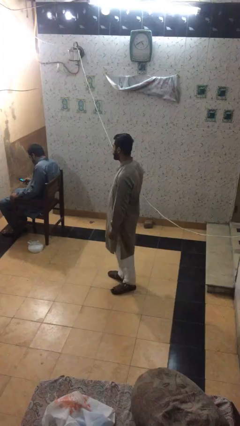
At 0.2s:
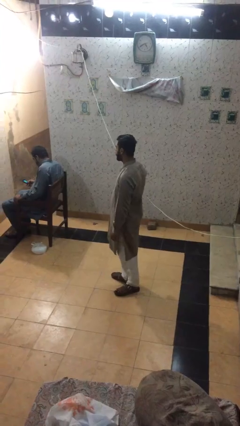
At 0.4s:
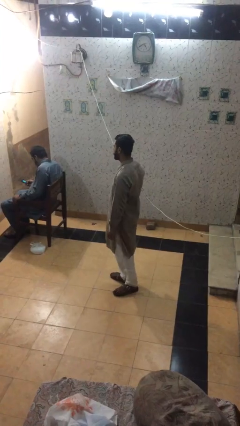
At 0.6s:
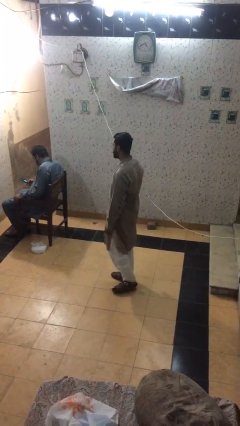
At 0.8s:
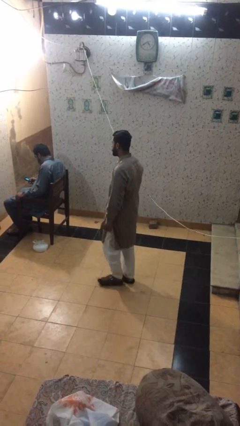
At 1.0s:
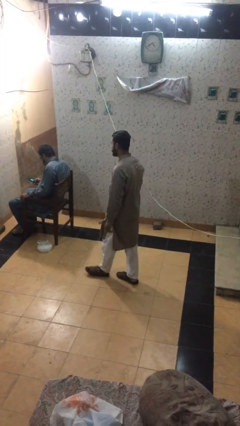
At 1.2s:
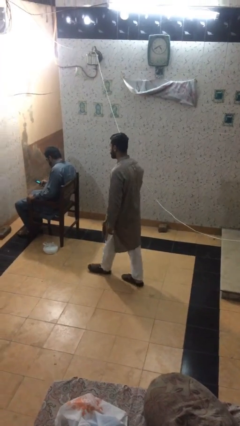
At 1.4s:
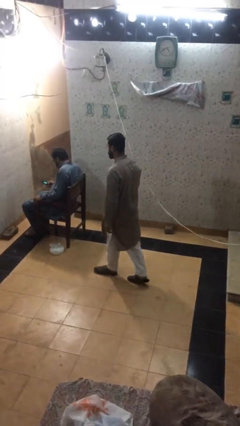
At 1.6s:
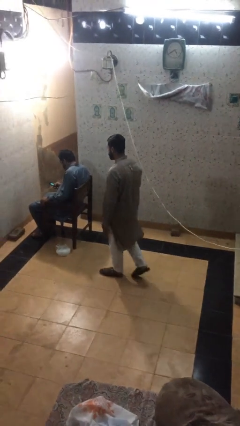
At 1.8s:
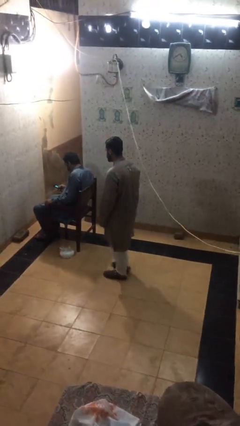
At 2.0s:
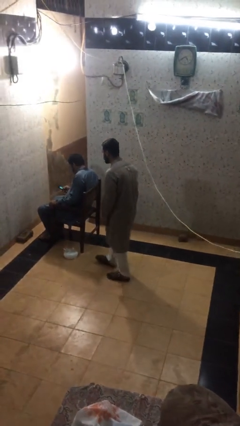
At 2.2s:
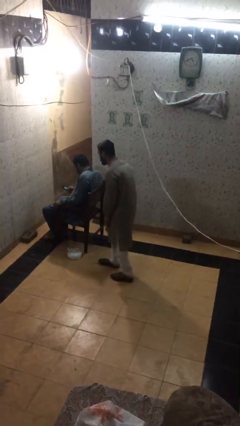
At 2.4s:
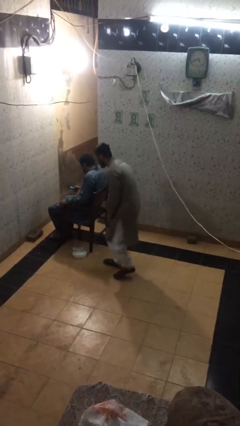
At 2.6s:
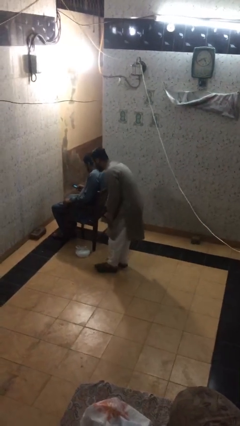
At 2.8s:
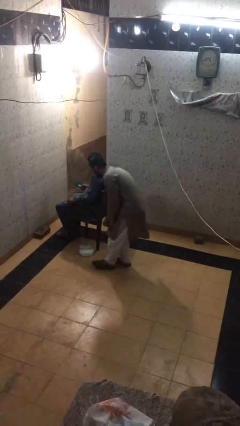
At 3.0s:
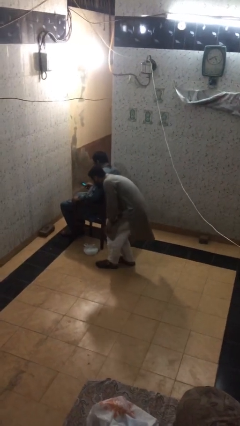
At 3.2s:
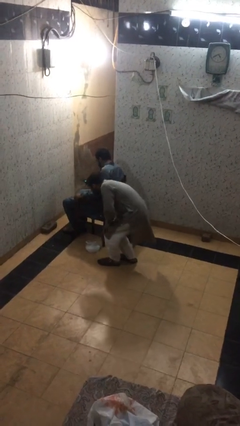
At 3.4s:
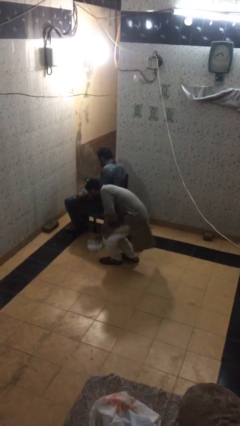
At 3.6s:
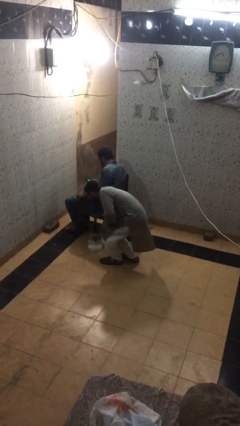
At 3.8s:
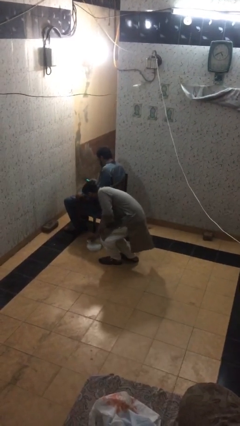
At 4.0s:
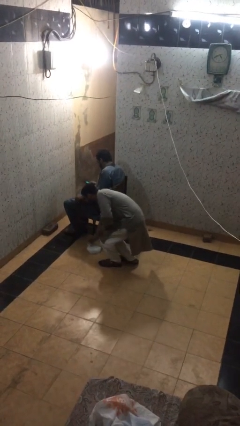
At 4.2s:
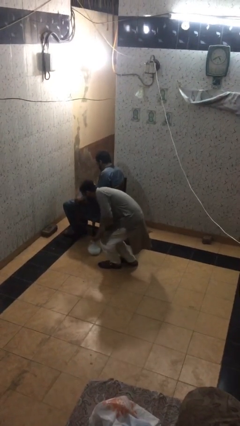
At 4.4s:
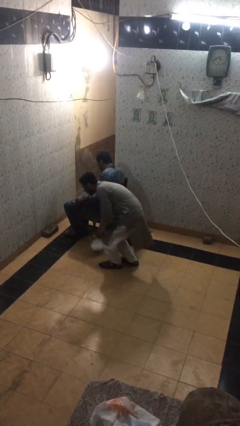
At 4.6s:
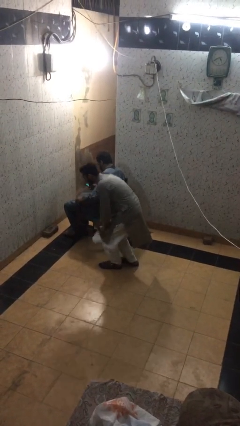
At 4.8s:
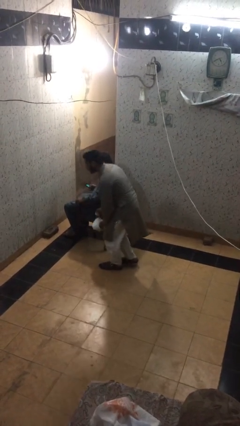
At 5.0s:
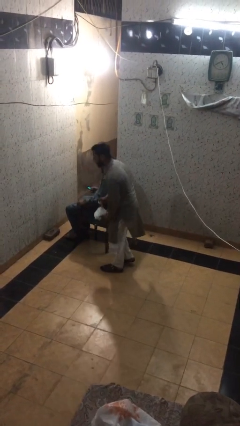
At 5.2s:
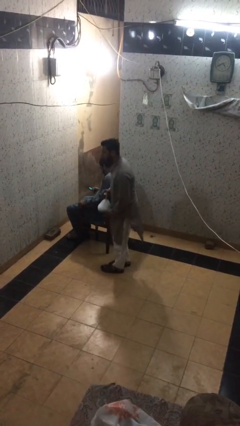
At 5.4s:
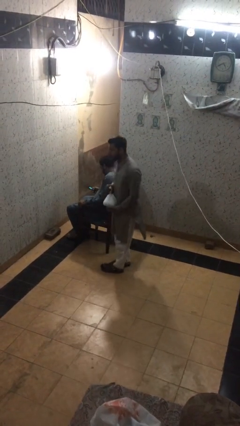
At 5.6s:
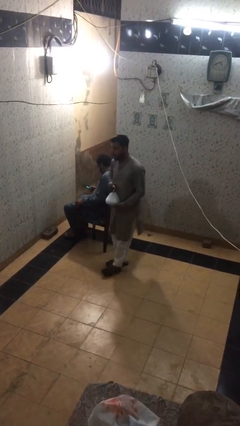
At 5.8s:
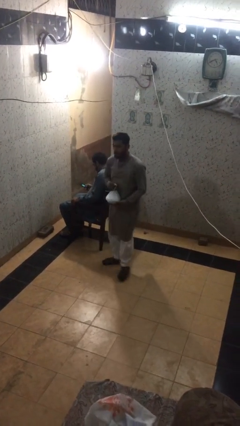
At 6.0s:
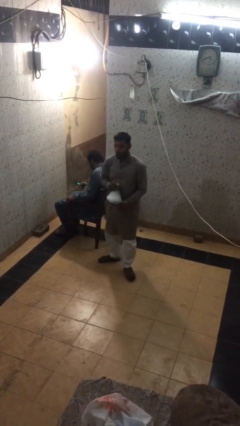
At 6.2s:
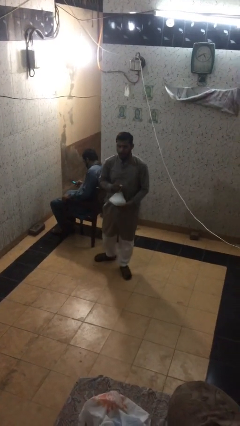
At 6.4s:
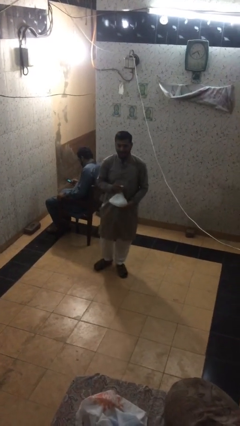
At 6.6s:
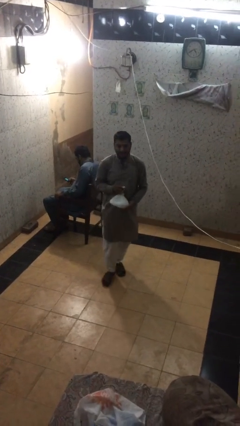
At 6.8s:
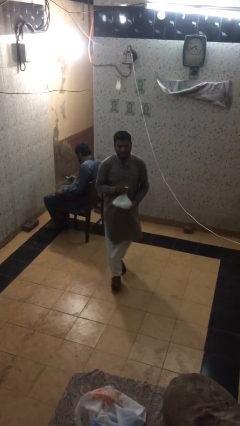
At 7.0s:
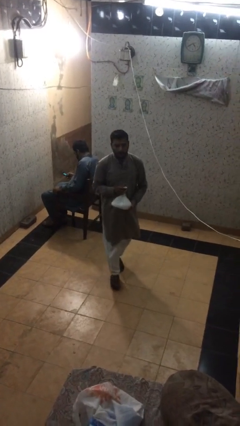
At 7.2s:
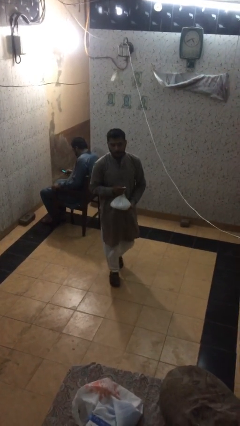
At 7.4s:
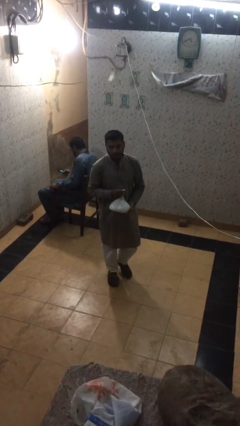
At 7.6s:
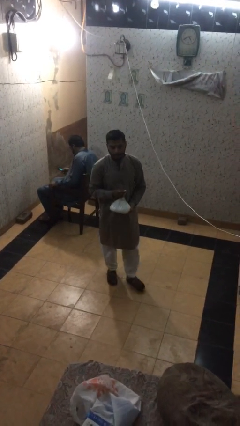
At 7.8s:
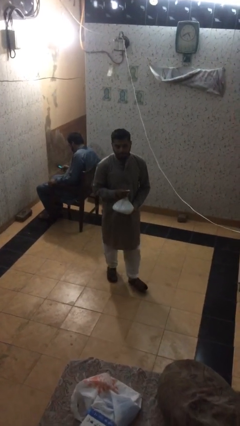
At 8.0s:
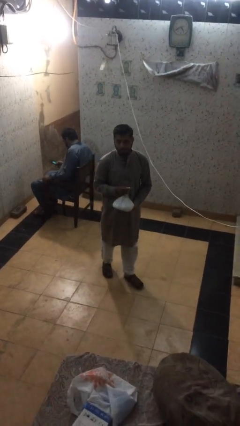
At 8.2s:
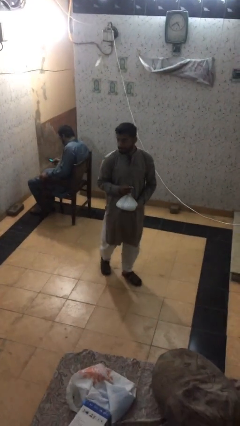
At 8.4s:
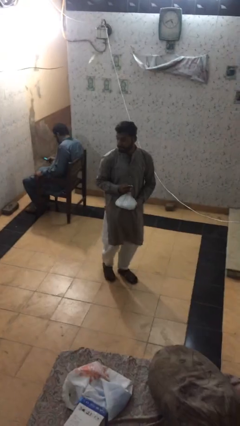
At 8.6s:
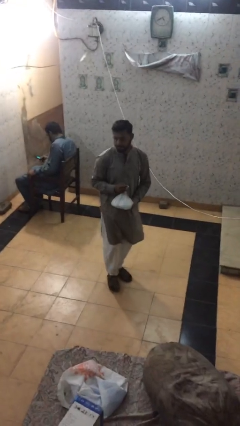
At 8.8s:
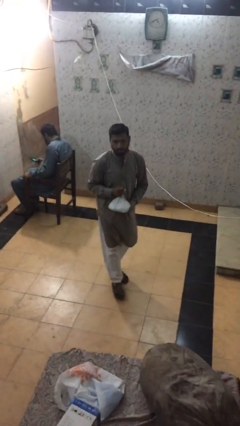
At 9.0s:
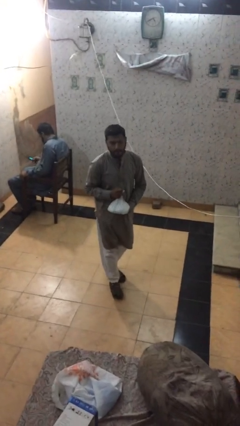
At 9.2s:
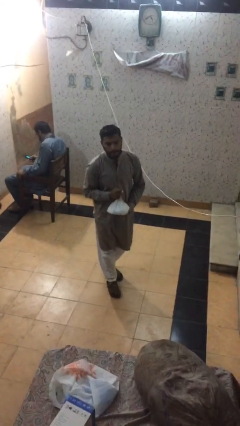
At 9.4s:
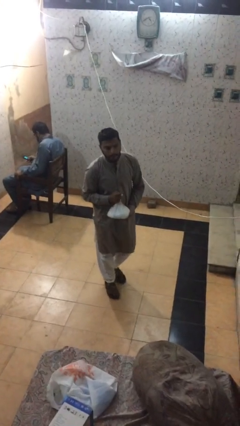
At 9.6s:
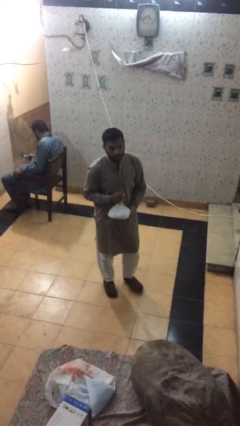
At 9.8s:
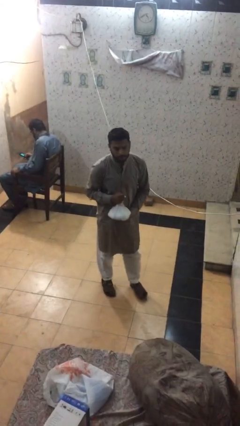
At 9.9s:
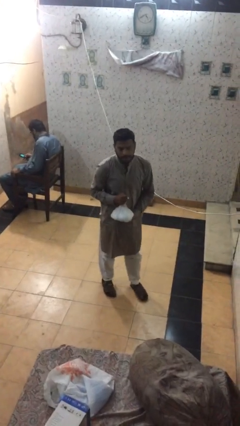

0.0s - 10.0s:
person steals object from person

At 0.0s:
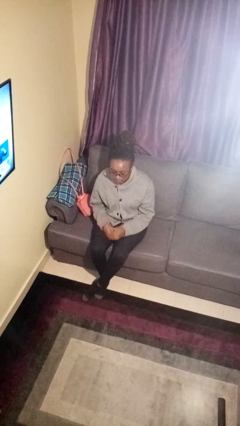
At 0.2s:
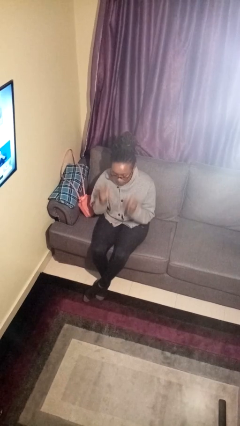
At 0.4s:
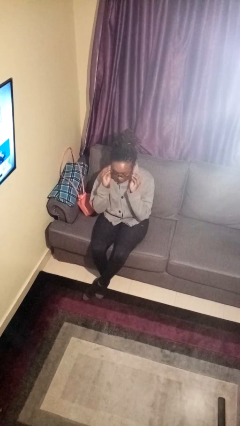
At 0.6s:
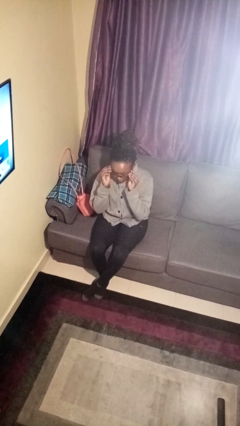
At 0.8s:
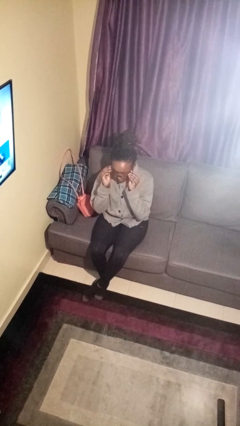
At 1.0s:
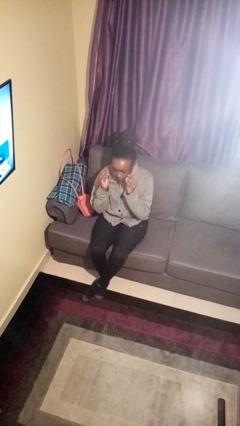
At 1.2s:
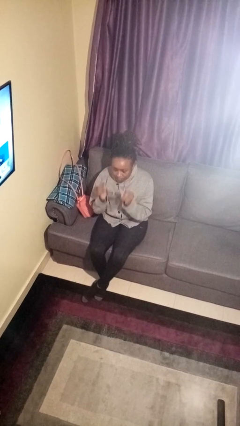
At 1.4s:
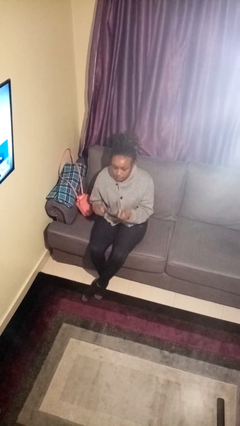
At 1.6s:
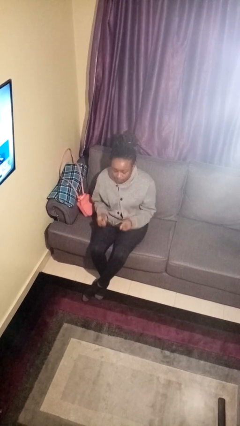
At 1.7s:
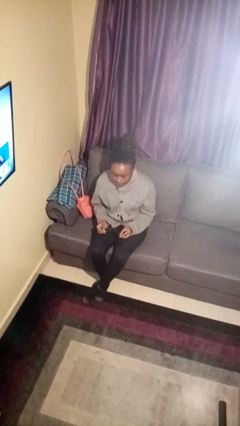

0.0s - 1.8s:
person takes off glasses

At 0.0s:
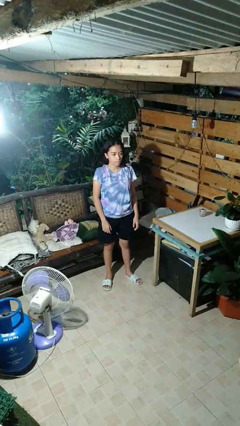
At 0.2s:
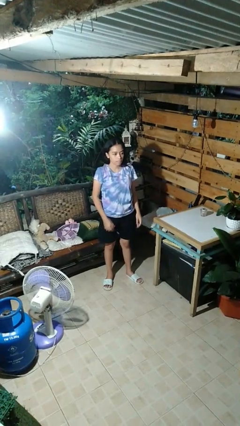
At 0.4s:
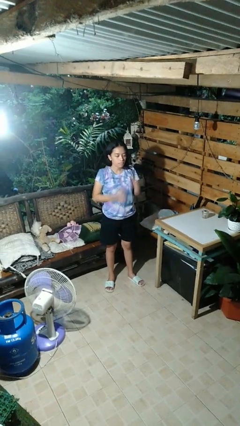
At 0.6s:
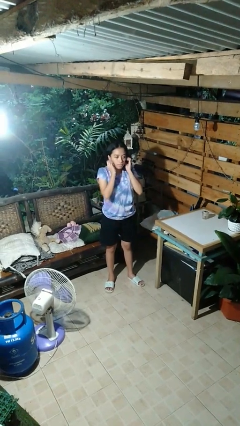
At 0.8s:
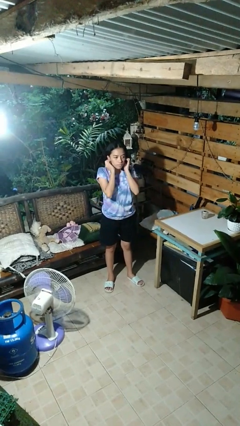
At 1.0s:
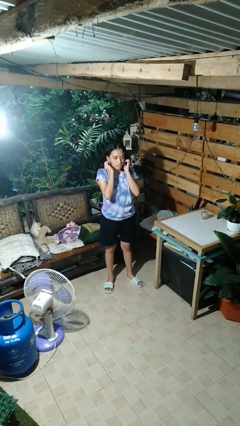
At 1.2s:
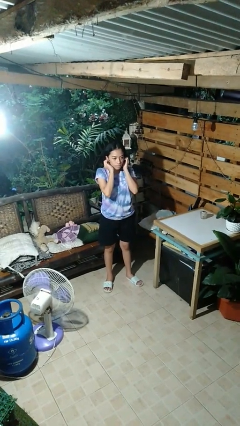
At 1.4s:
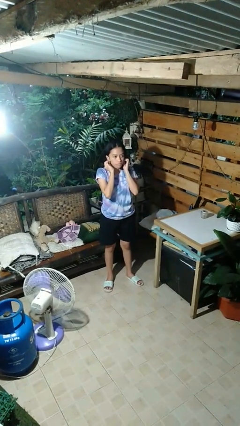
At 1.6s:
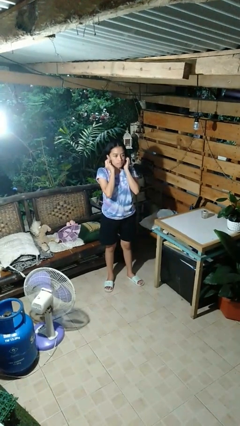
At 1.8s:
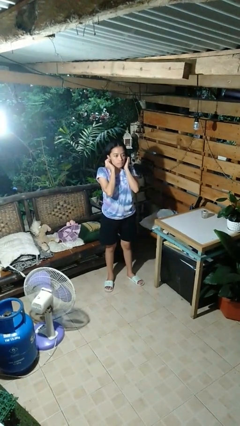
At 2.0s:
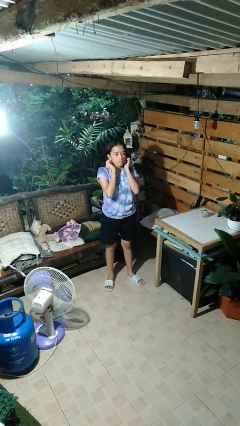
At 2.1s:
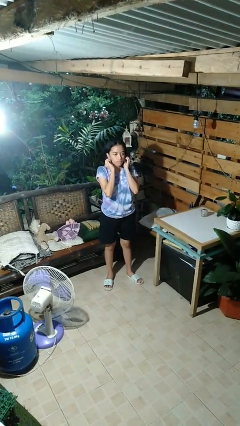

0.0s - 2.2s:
person touches earlobe

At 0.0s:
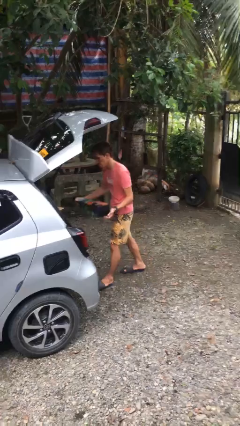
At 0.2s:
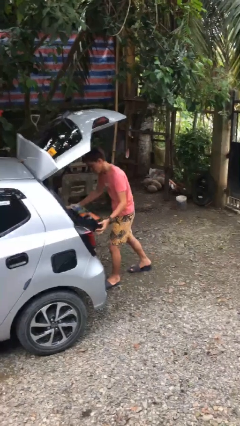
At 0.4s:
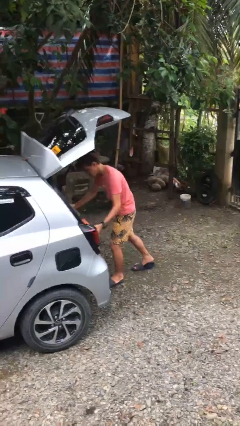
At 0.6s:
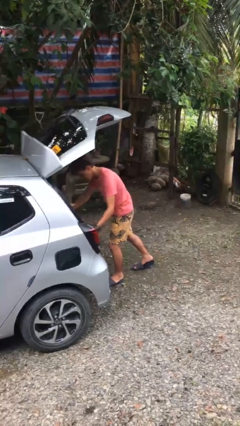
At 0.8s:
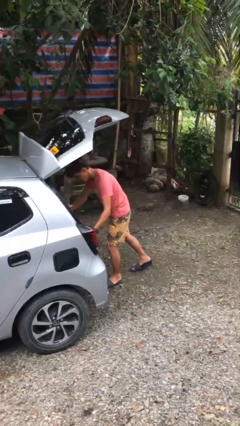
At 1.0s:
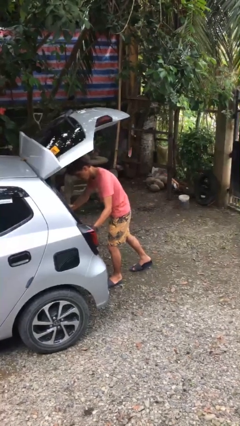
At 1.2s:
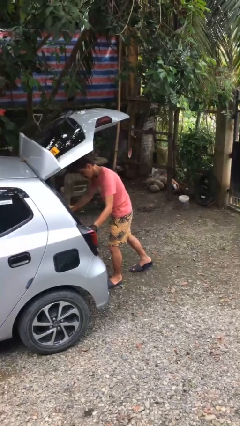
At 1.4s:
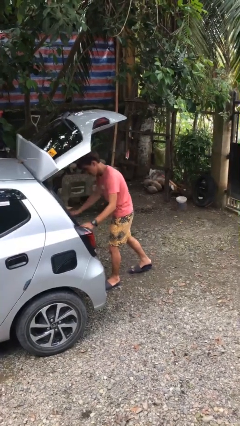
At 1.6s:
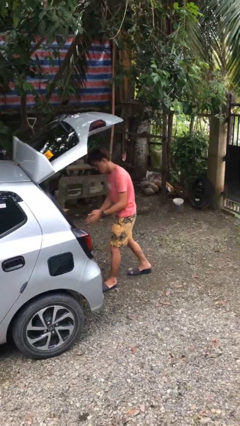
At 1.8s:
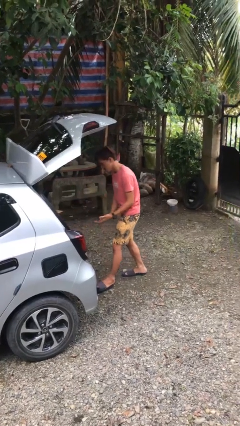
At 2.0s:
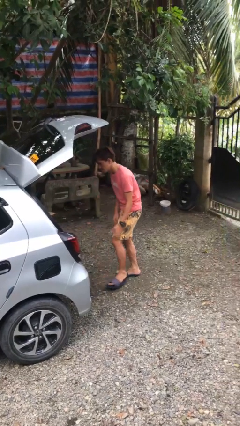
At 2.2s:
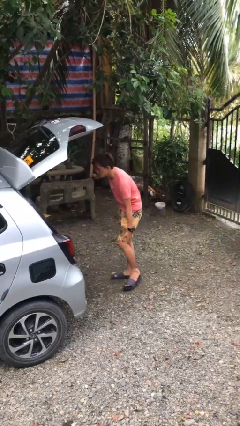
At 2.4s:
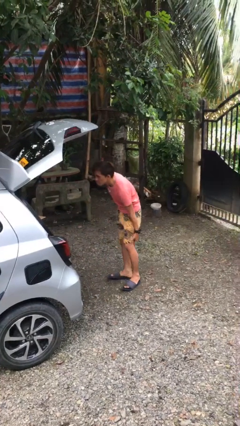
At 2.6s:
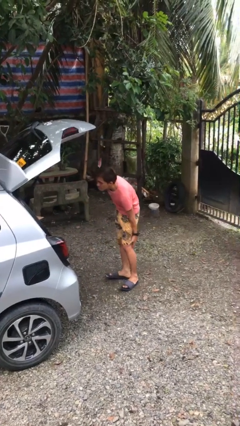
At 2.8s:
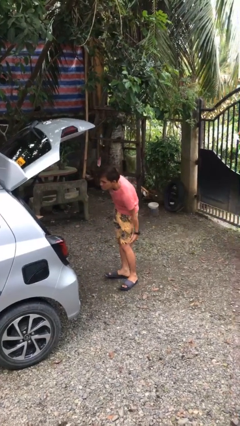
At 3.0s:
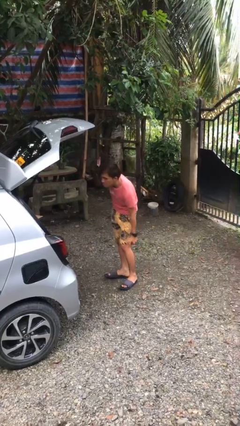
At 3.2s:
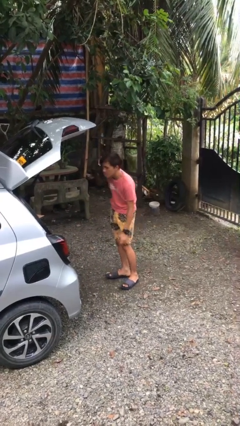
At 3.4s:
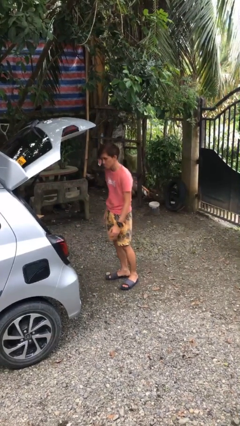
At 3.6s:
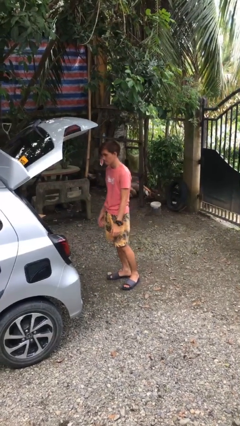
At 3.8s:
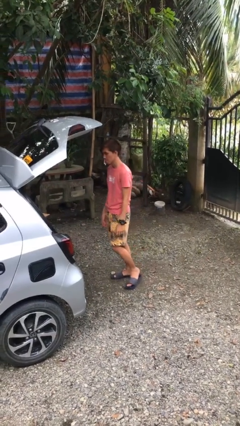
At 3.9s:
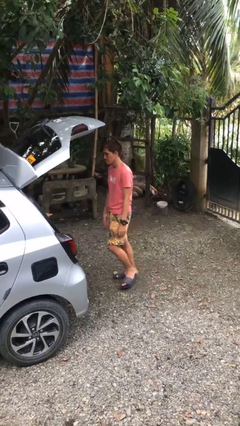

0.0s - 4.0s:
person loads car
